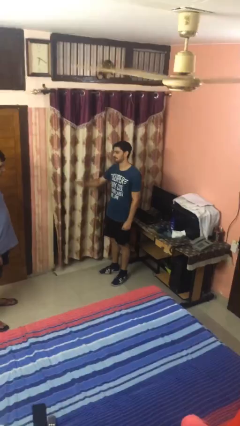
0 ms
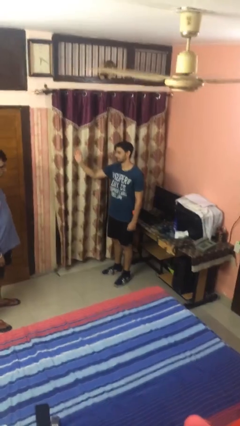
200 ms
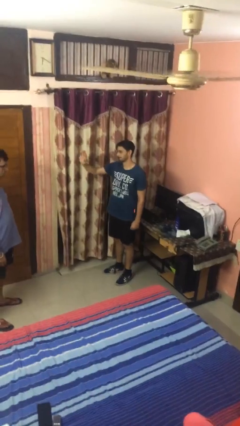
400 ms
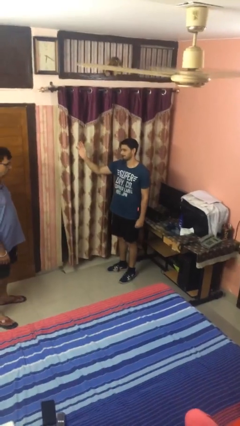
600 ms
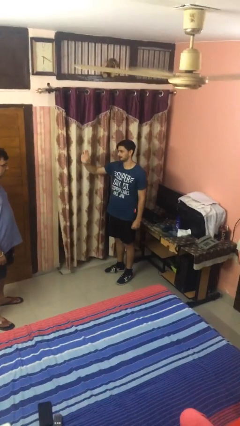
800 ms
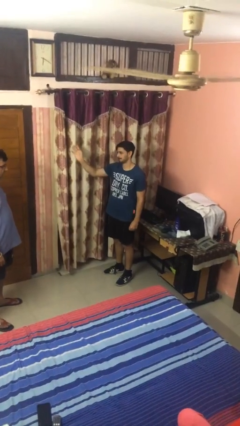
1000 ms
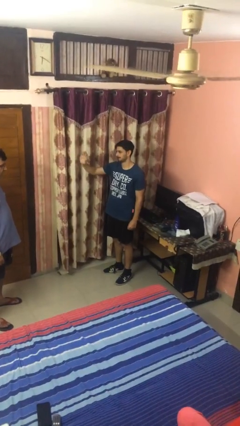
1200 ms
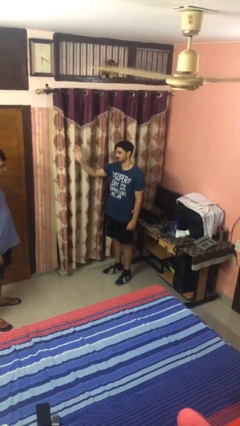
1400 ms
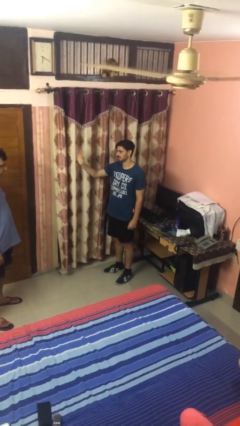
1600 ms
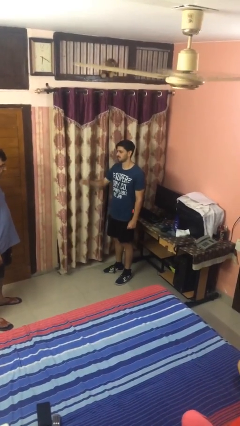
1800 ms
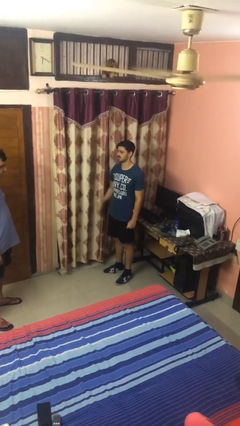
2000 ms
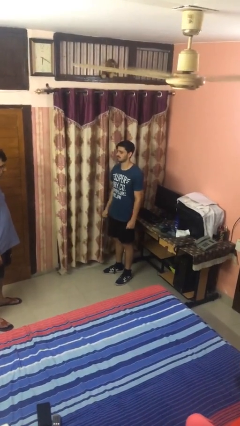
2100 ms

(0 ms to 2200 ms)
person waves at person

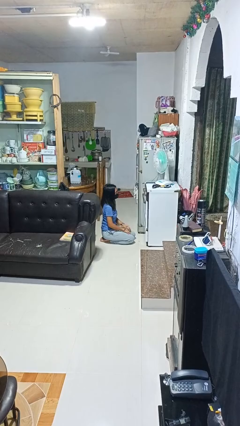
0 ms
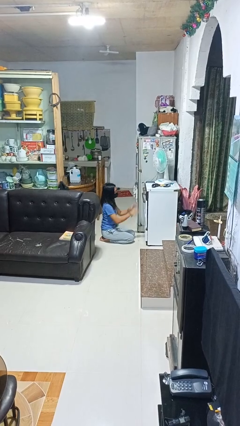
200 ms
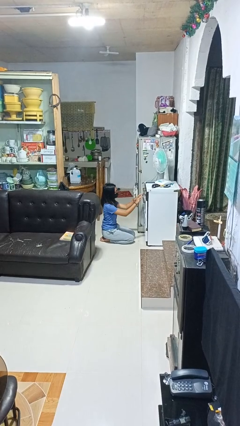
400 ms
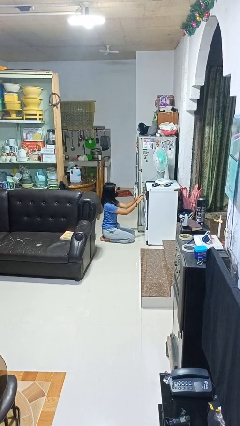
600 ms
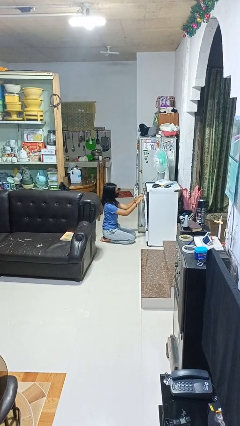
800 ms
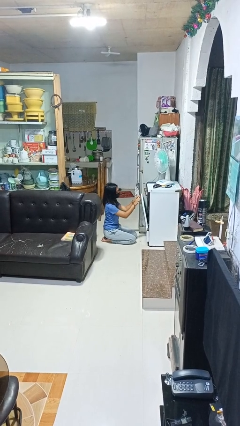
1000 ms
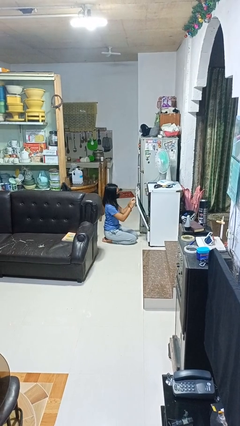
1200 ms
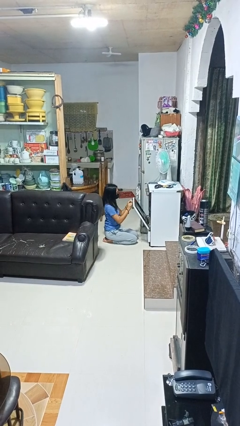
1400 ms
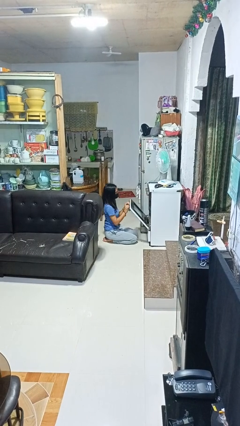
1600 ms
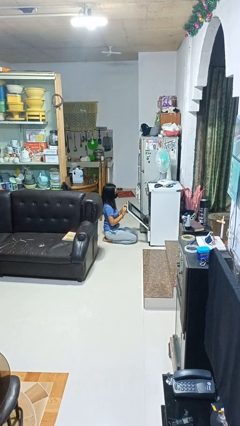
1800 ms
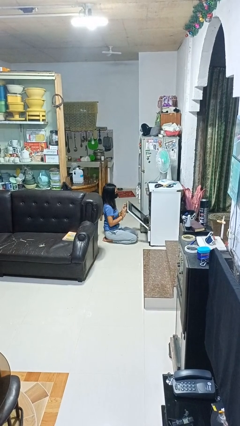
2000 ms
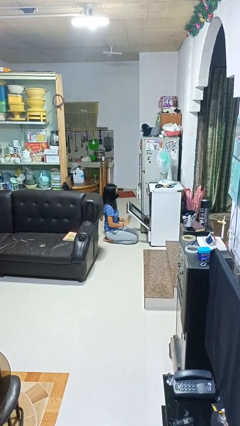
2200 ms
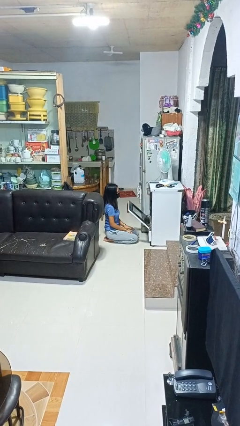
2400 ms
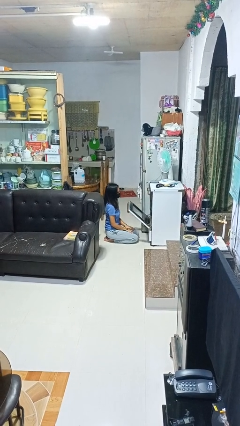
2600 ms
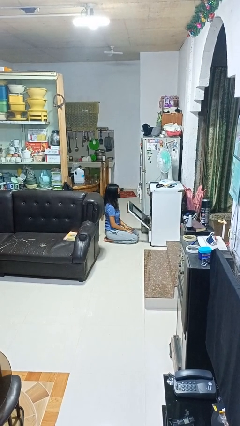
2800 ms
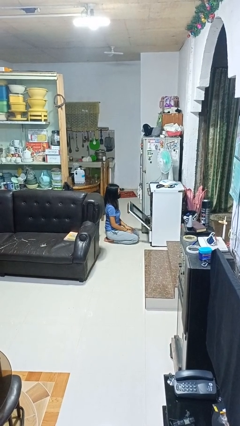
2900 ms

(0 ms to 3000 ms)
person opens oven door

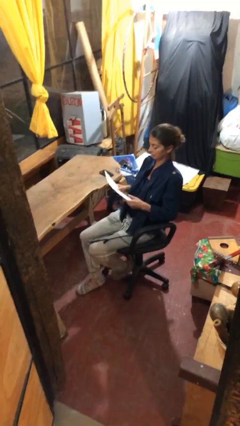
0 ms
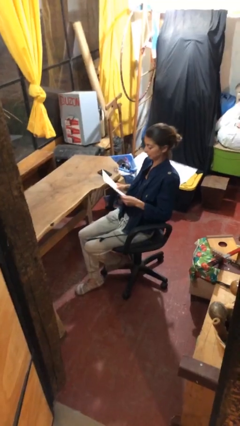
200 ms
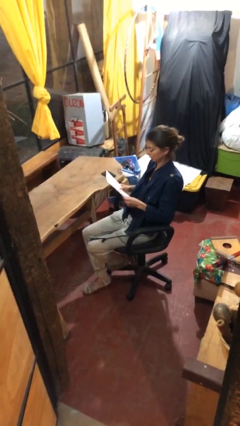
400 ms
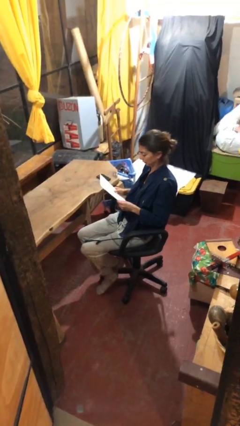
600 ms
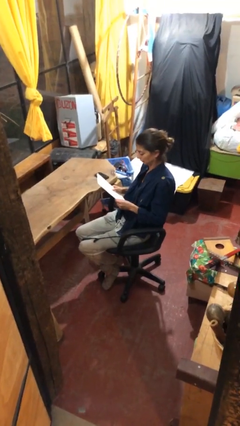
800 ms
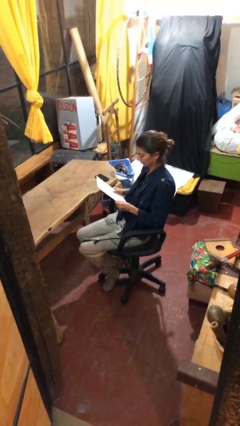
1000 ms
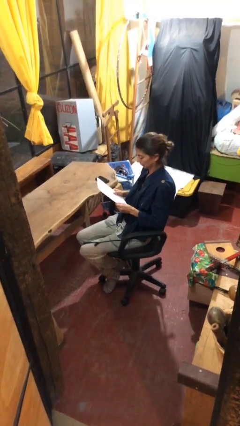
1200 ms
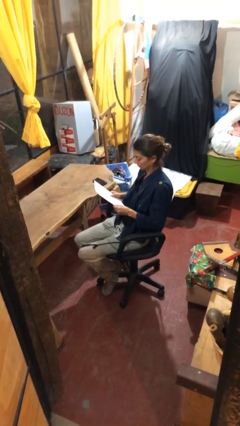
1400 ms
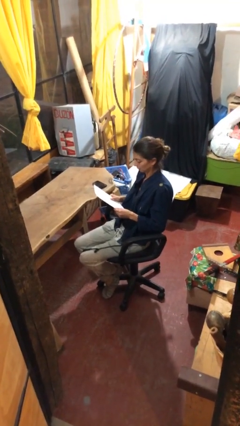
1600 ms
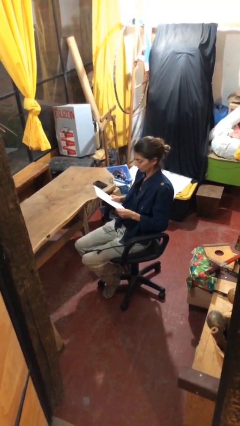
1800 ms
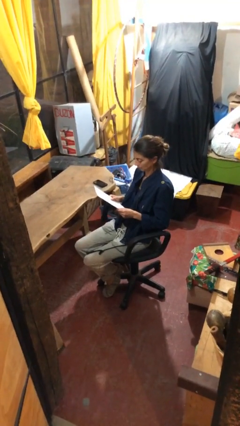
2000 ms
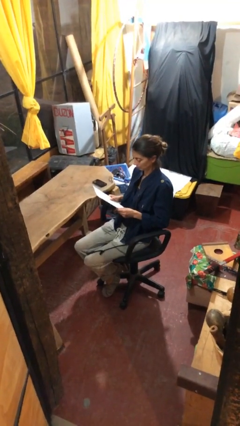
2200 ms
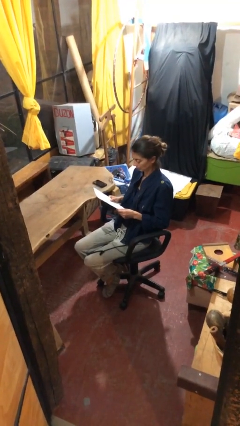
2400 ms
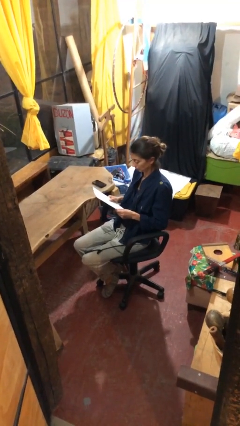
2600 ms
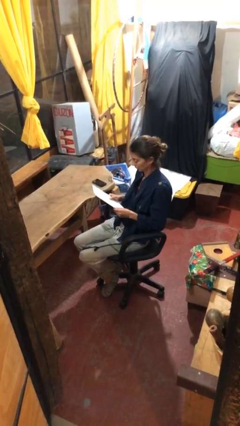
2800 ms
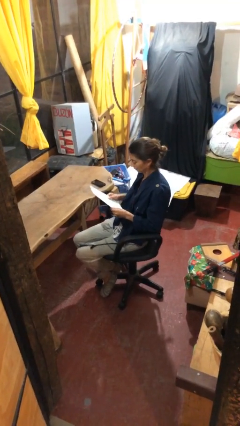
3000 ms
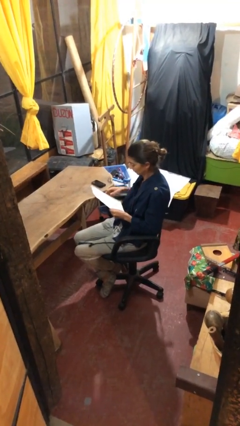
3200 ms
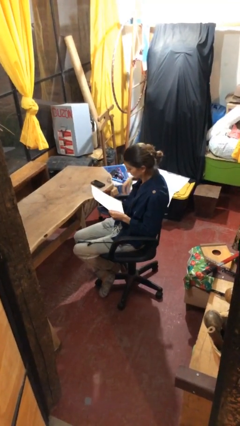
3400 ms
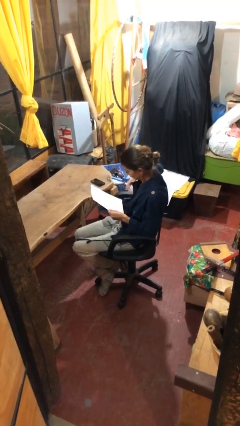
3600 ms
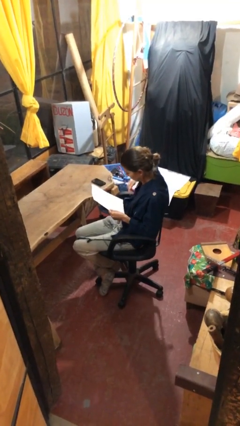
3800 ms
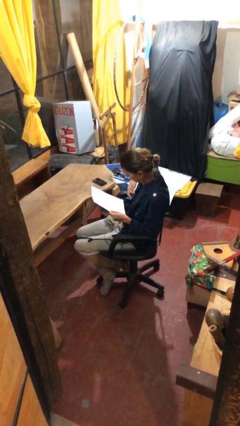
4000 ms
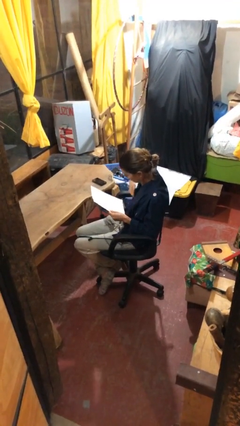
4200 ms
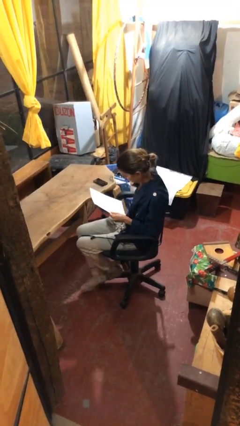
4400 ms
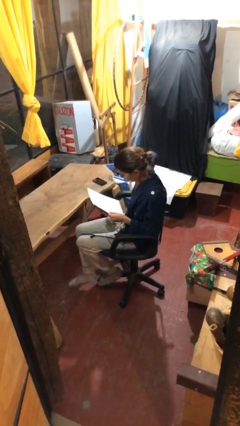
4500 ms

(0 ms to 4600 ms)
person reads document

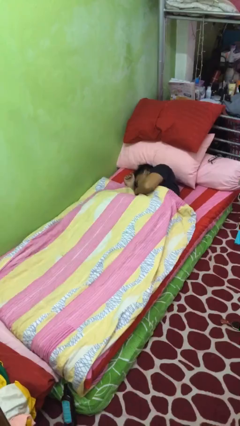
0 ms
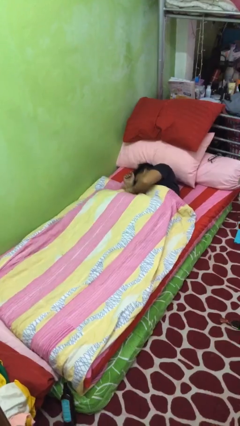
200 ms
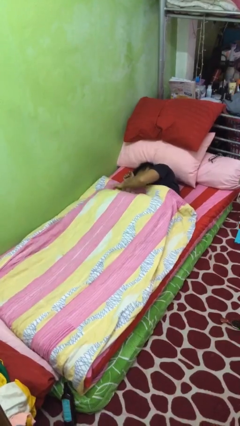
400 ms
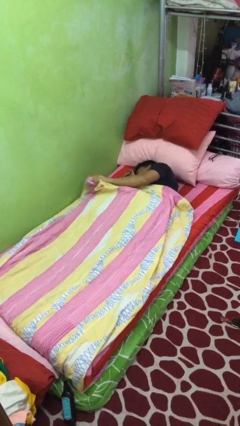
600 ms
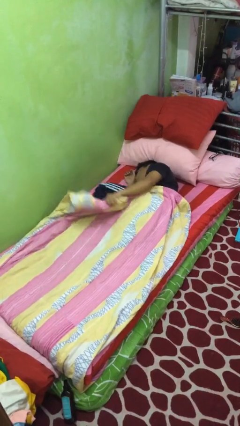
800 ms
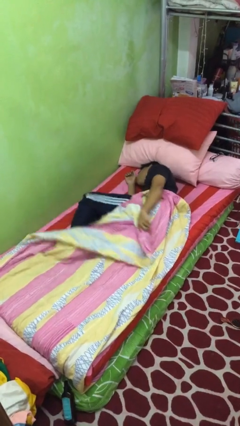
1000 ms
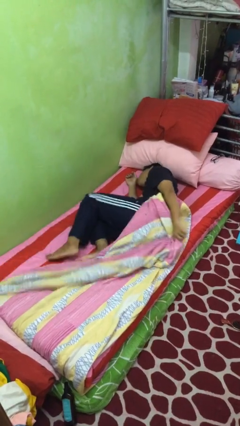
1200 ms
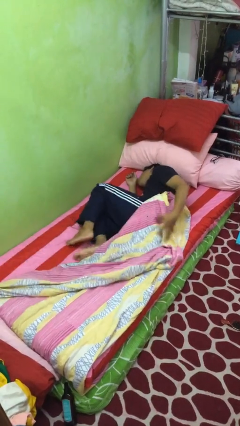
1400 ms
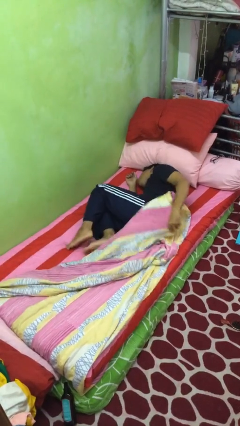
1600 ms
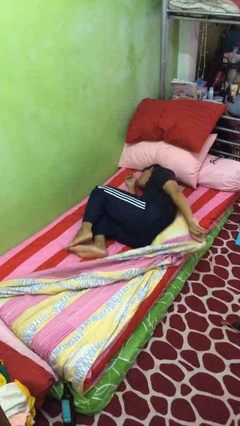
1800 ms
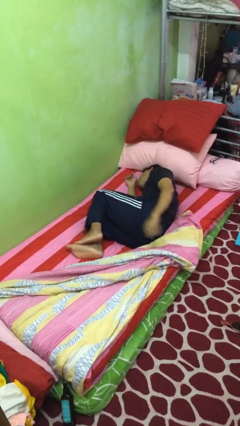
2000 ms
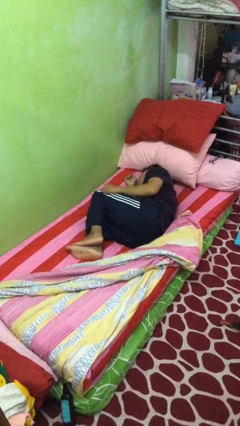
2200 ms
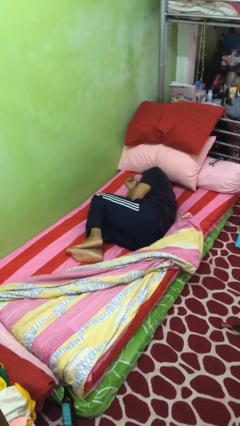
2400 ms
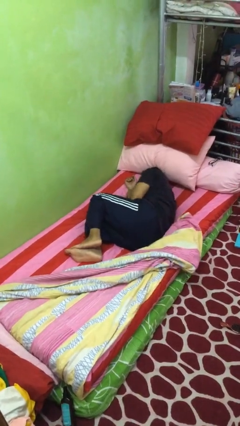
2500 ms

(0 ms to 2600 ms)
person uncovers with bedsheets

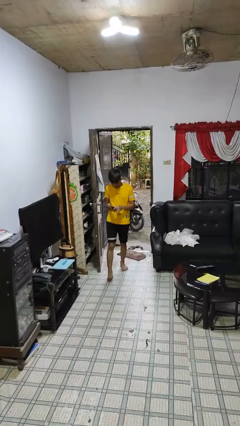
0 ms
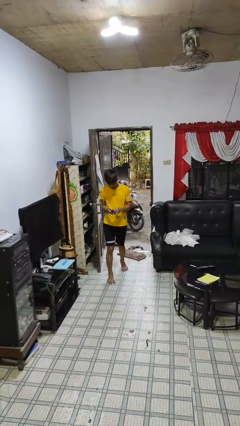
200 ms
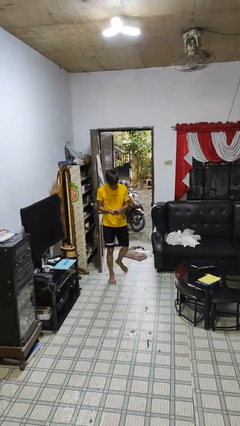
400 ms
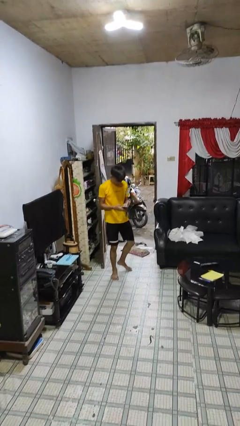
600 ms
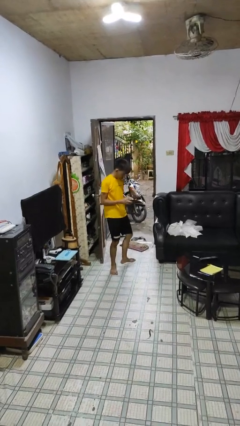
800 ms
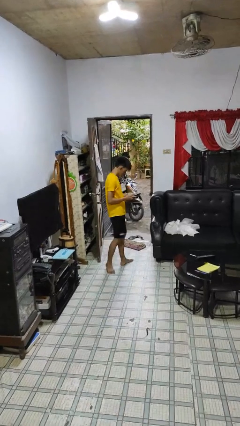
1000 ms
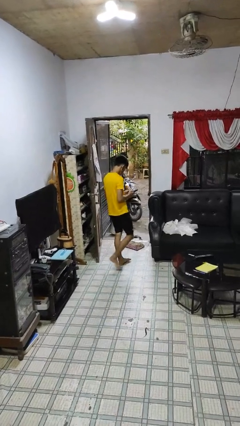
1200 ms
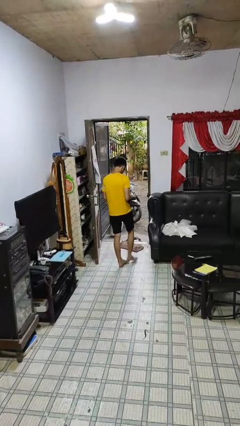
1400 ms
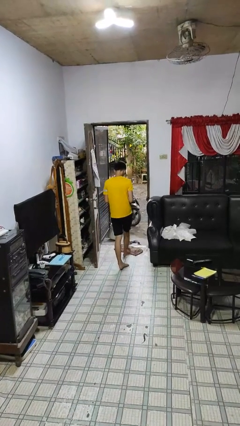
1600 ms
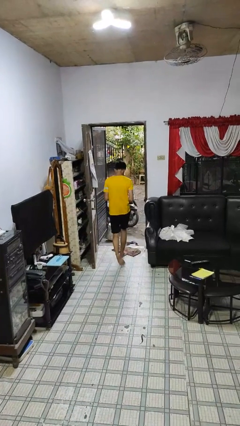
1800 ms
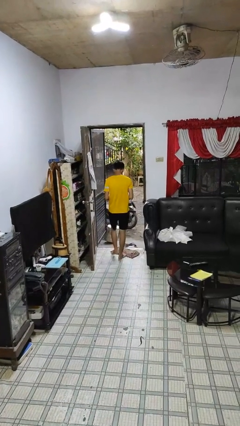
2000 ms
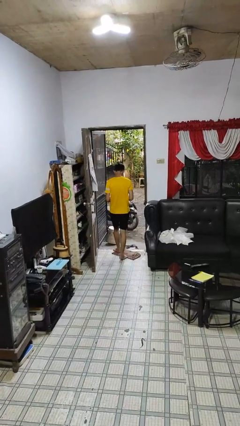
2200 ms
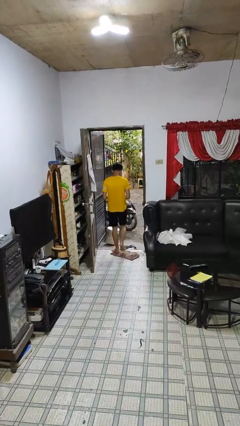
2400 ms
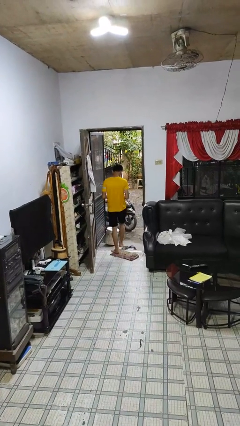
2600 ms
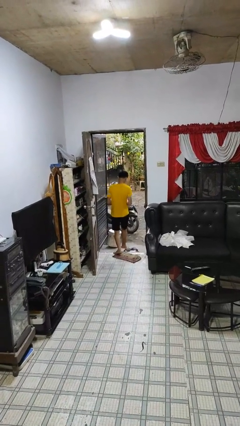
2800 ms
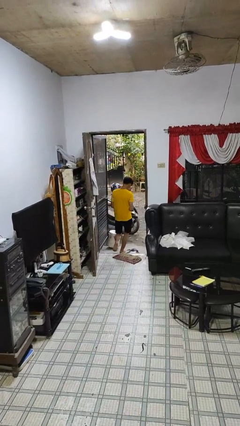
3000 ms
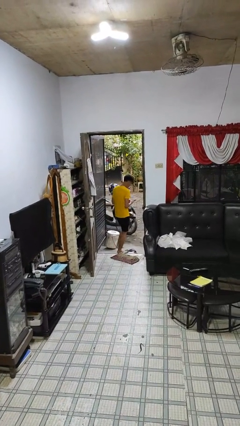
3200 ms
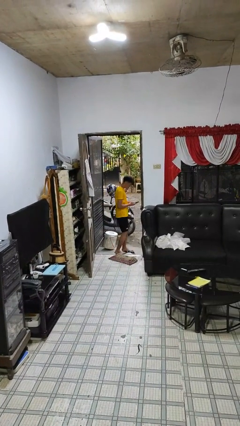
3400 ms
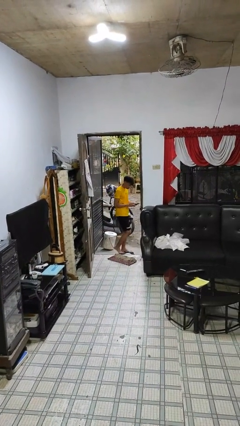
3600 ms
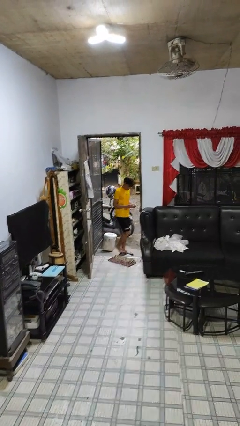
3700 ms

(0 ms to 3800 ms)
person exits scene through structure

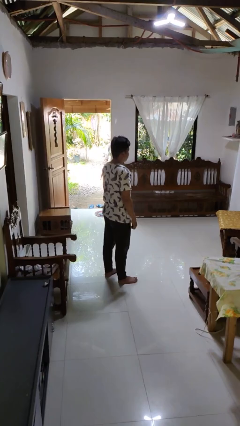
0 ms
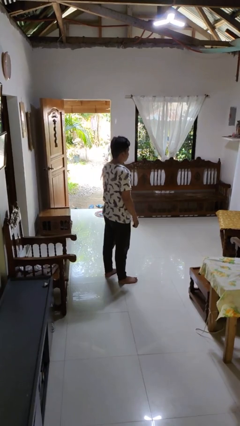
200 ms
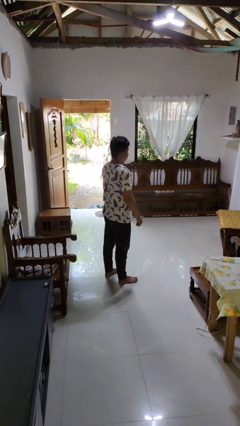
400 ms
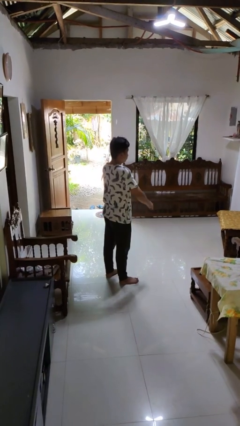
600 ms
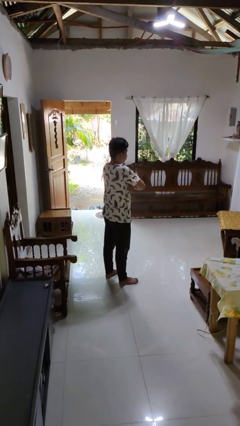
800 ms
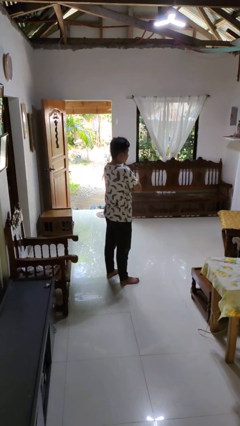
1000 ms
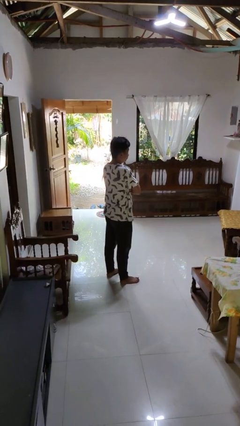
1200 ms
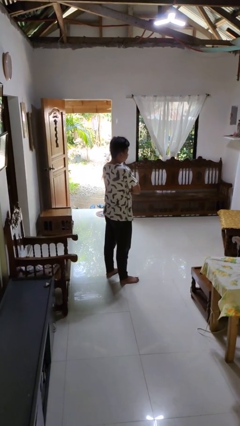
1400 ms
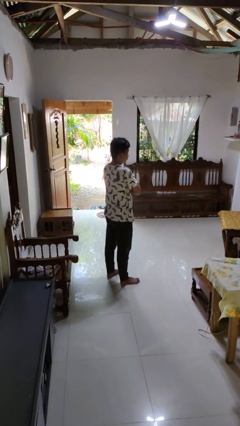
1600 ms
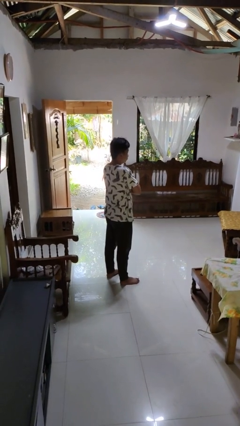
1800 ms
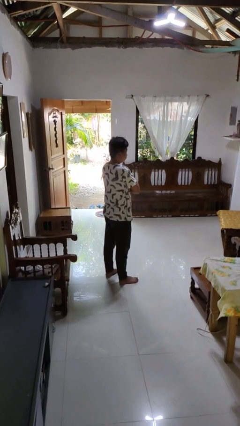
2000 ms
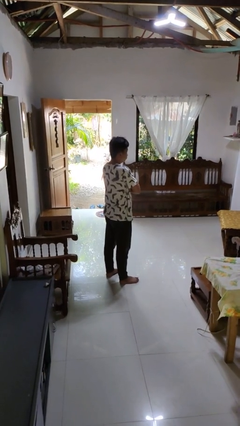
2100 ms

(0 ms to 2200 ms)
person crosses arms
